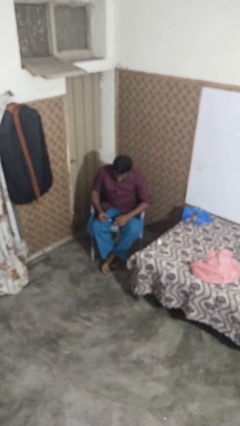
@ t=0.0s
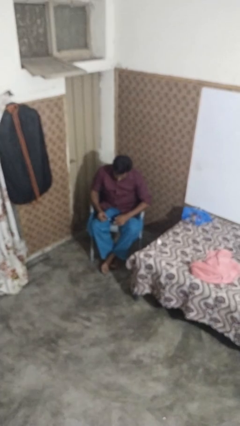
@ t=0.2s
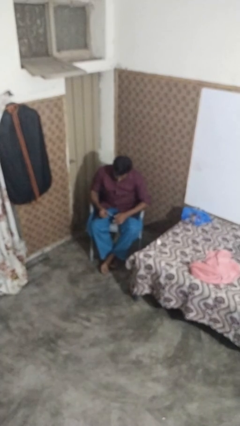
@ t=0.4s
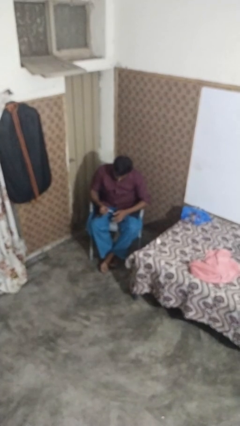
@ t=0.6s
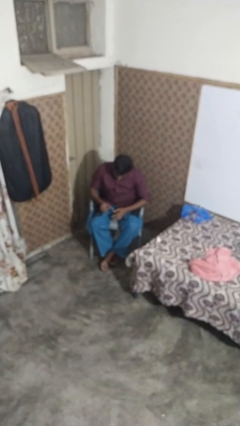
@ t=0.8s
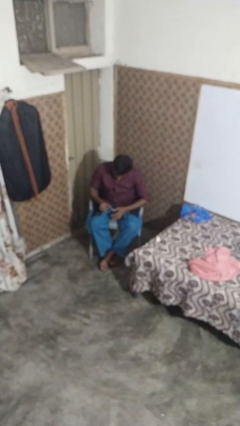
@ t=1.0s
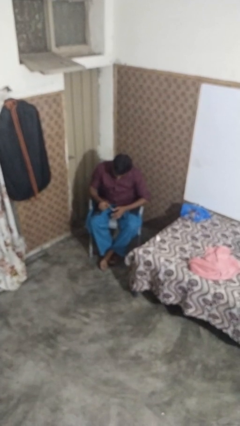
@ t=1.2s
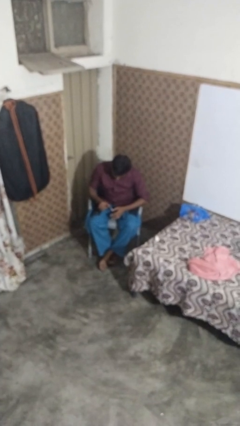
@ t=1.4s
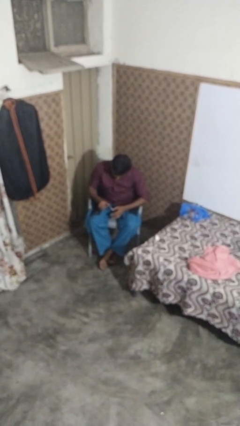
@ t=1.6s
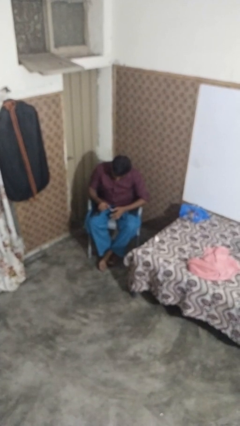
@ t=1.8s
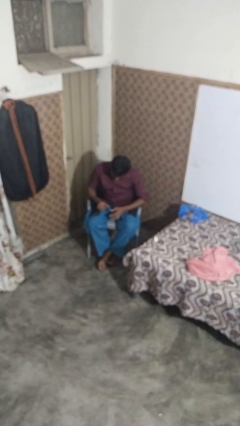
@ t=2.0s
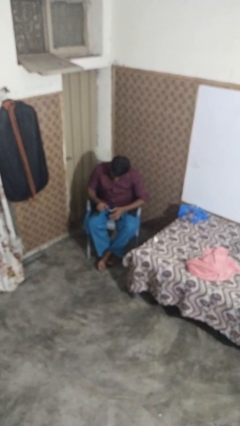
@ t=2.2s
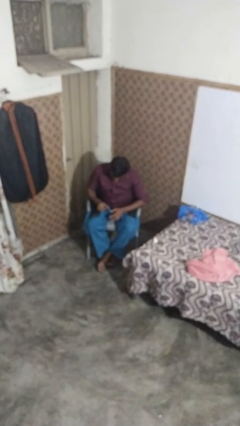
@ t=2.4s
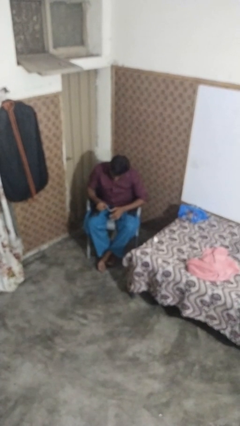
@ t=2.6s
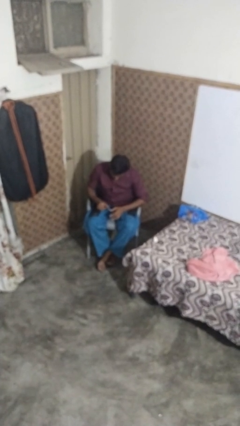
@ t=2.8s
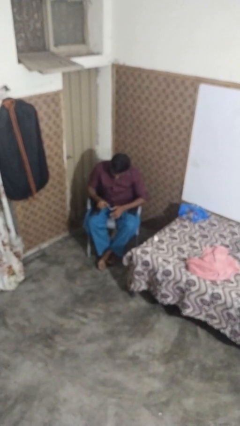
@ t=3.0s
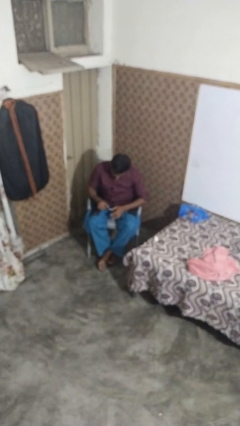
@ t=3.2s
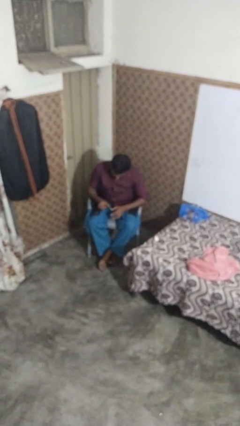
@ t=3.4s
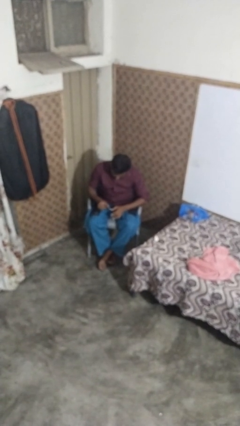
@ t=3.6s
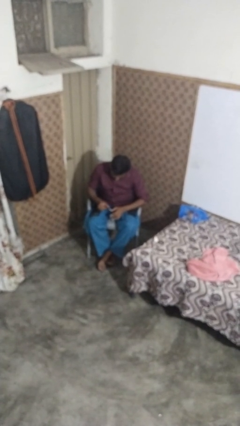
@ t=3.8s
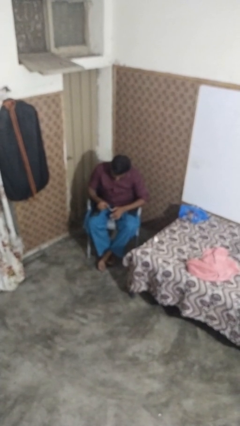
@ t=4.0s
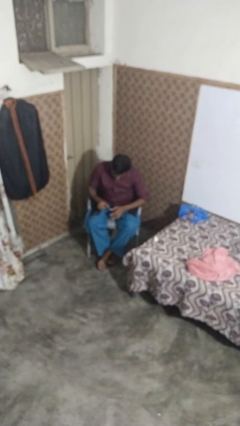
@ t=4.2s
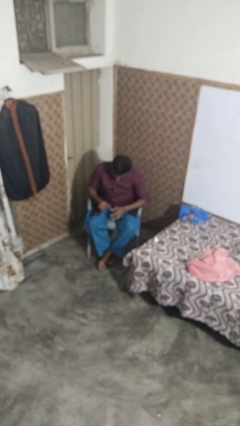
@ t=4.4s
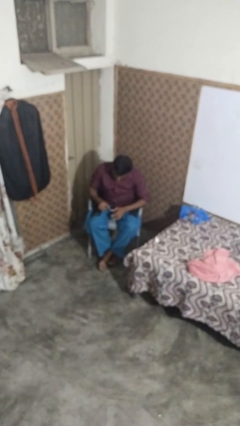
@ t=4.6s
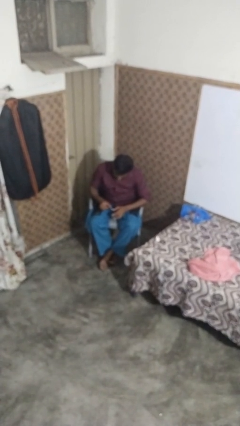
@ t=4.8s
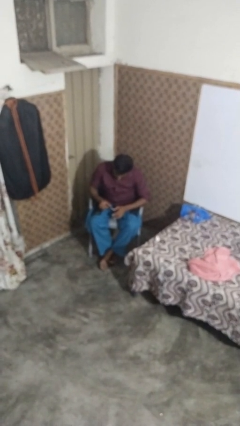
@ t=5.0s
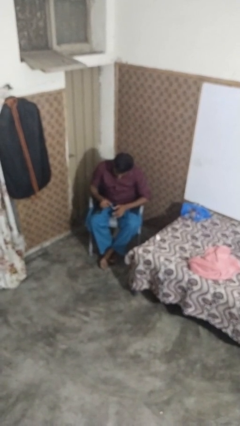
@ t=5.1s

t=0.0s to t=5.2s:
person paints fingernails

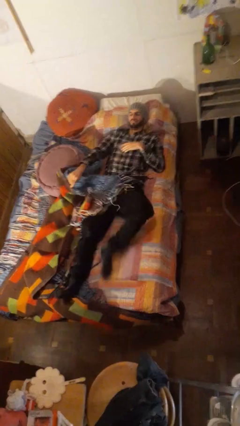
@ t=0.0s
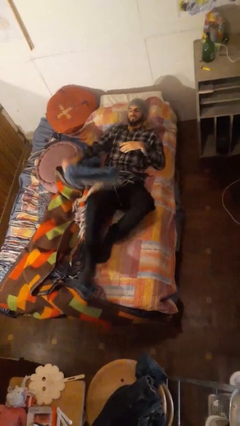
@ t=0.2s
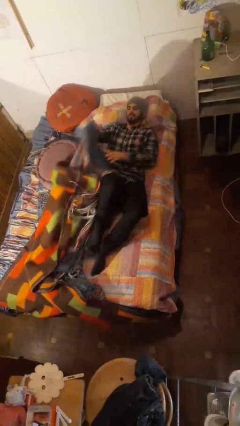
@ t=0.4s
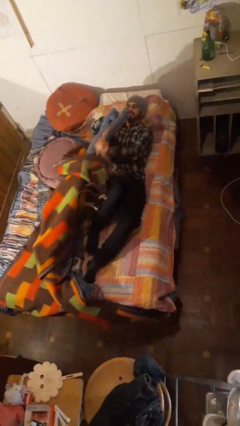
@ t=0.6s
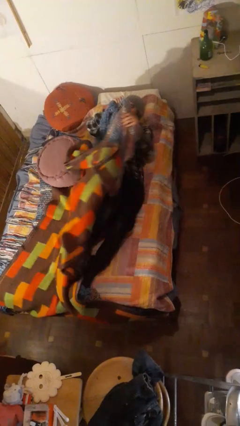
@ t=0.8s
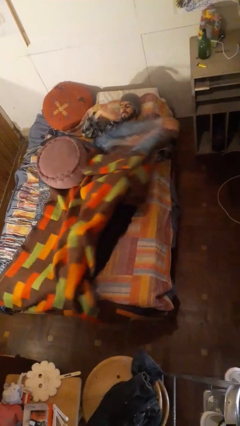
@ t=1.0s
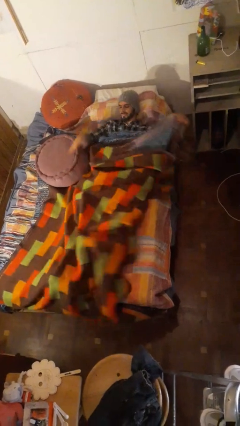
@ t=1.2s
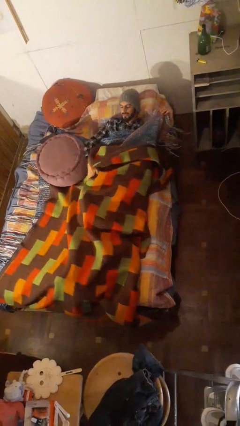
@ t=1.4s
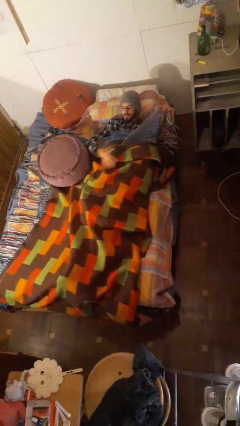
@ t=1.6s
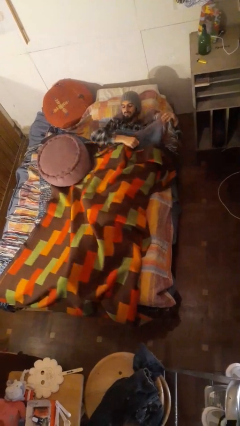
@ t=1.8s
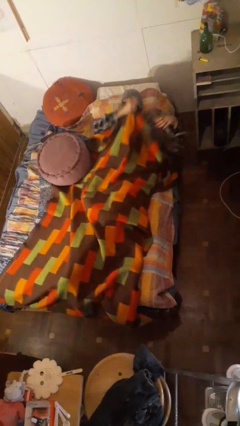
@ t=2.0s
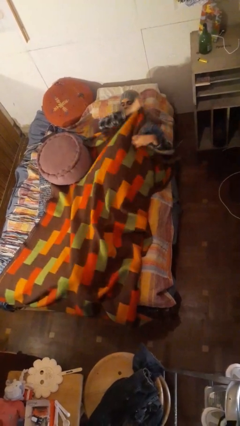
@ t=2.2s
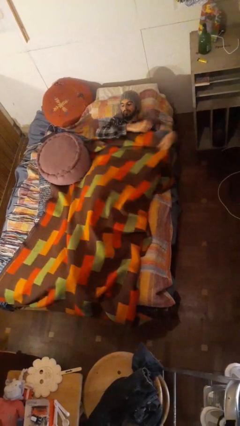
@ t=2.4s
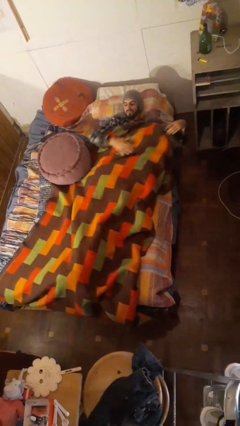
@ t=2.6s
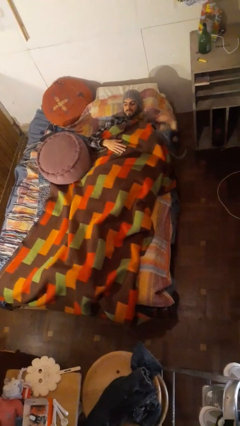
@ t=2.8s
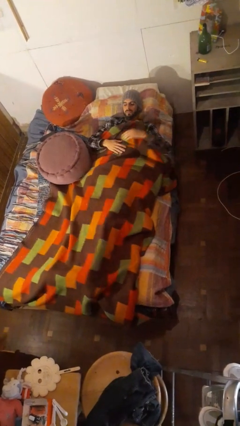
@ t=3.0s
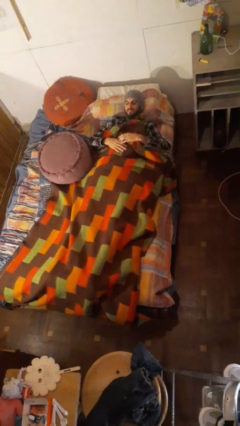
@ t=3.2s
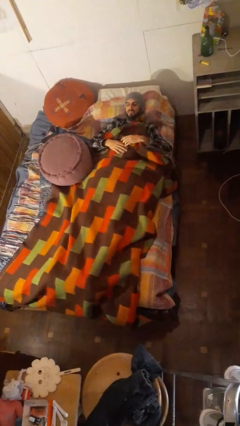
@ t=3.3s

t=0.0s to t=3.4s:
person covers with bedsheets

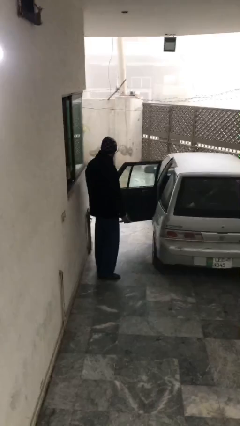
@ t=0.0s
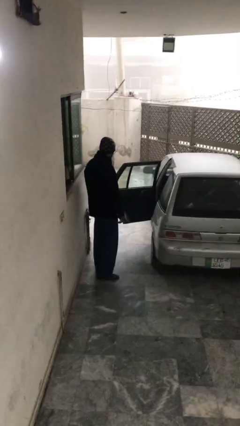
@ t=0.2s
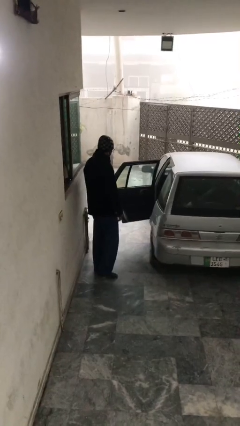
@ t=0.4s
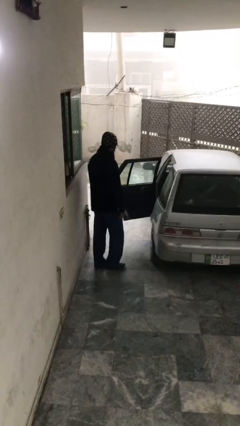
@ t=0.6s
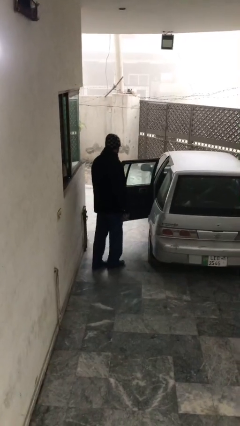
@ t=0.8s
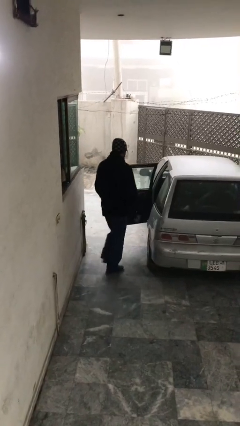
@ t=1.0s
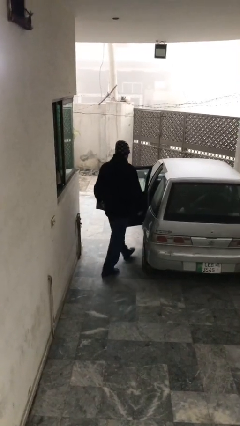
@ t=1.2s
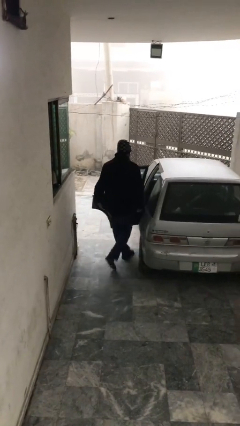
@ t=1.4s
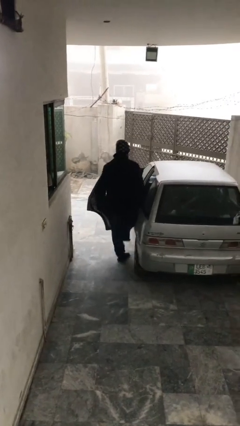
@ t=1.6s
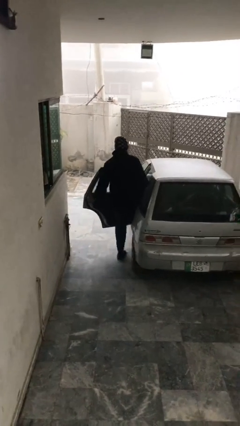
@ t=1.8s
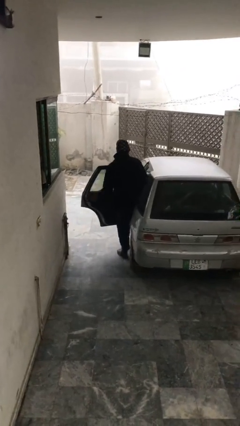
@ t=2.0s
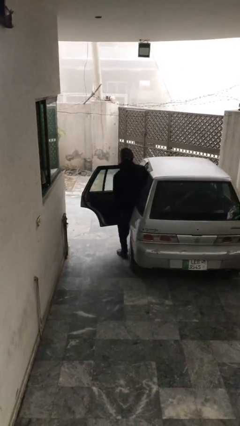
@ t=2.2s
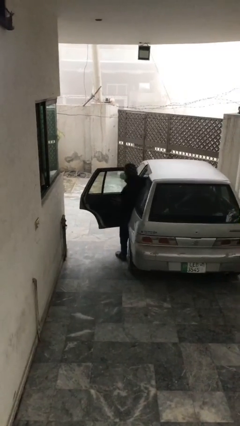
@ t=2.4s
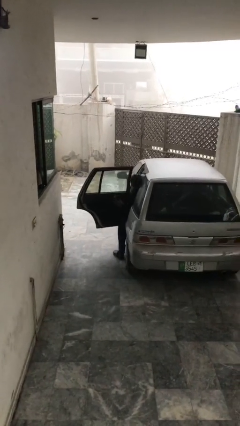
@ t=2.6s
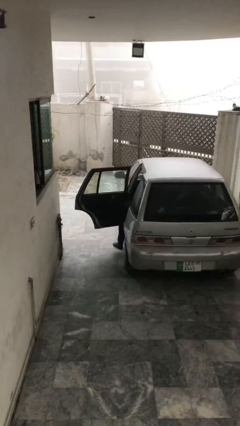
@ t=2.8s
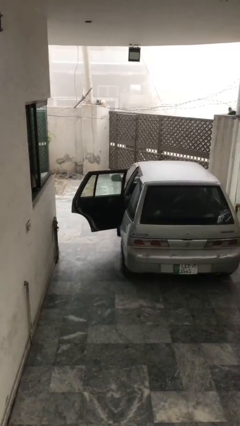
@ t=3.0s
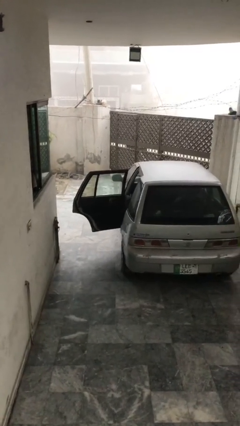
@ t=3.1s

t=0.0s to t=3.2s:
person enters car

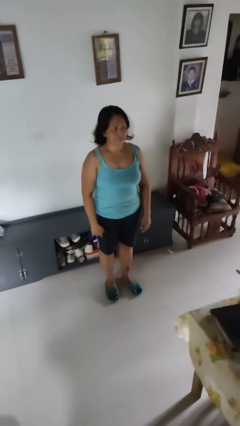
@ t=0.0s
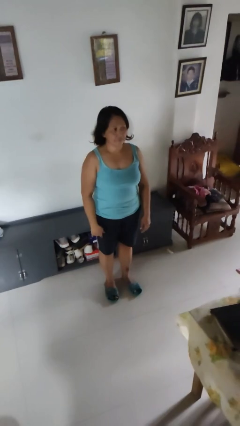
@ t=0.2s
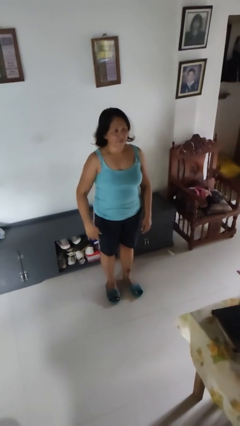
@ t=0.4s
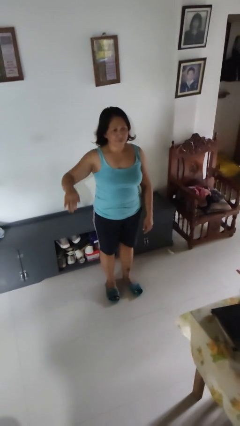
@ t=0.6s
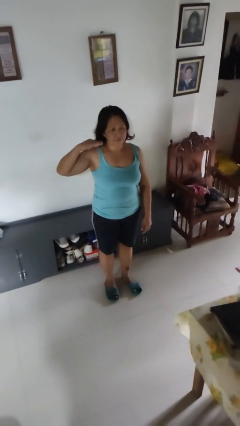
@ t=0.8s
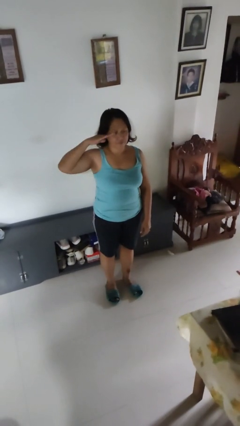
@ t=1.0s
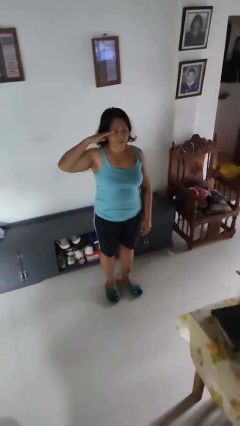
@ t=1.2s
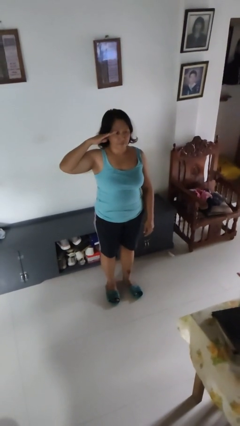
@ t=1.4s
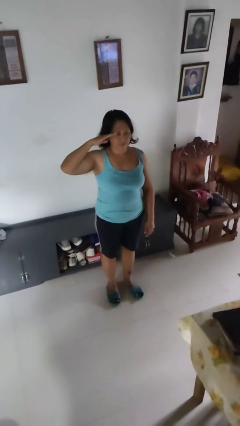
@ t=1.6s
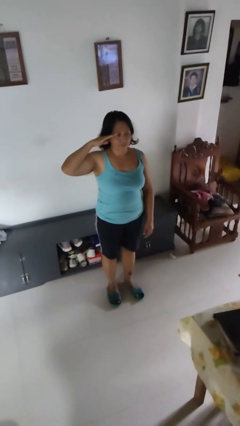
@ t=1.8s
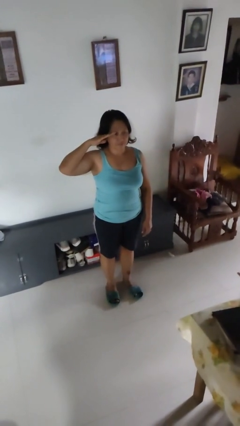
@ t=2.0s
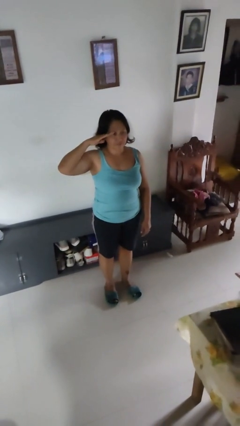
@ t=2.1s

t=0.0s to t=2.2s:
person salutes

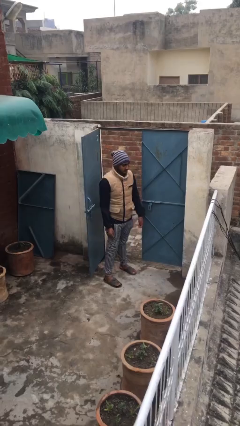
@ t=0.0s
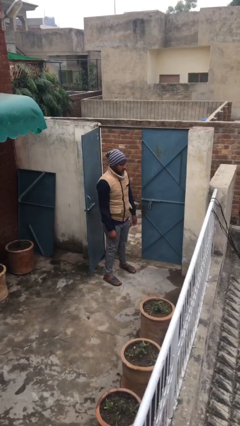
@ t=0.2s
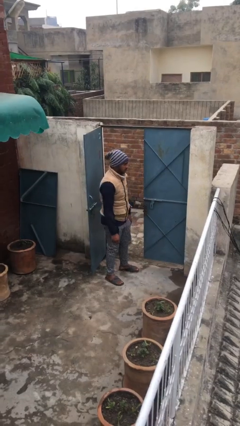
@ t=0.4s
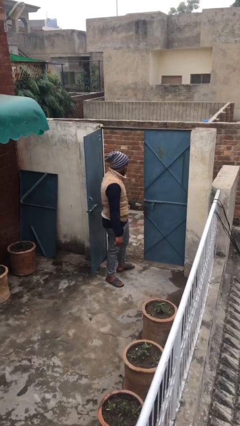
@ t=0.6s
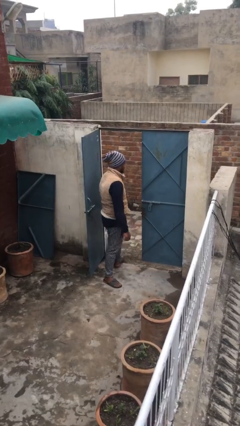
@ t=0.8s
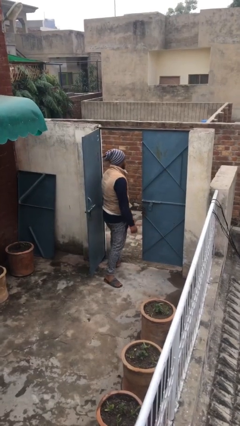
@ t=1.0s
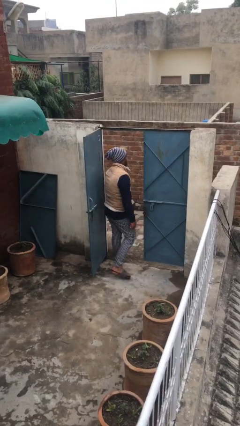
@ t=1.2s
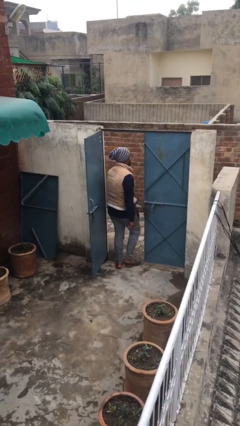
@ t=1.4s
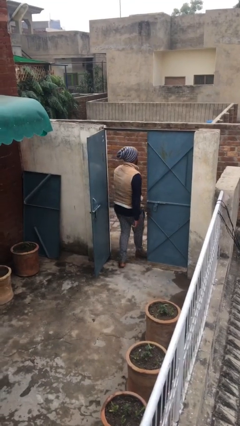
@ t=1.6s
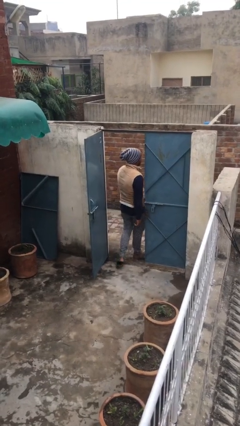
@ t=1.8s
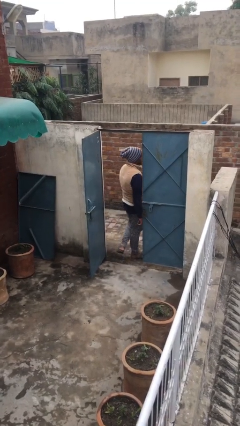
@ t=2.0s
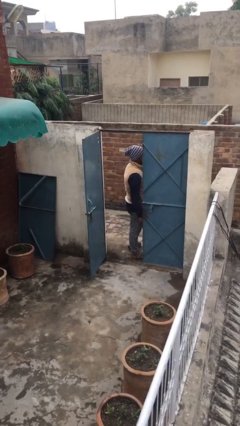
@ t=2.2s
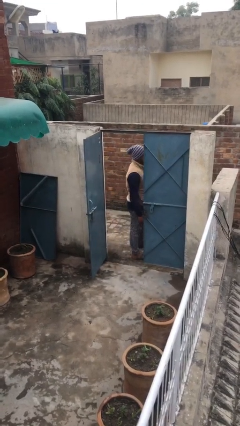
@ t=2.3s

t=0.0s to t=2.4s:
person exits scene through structure

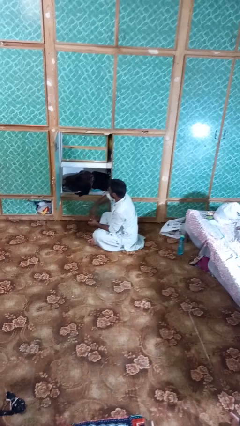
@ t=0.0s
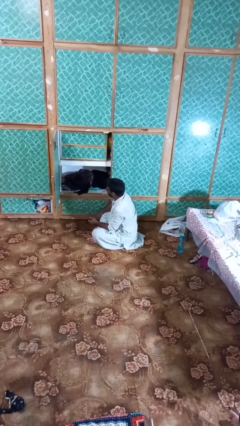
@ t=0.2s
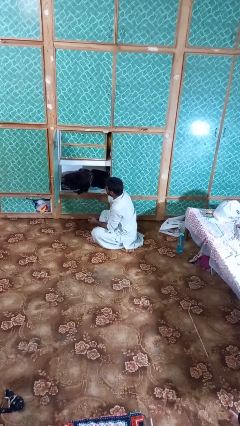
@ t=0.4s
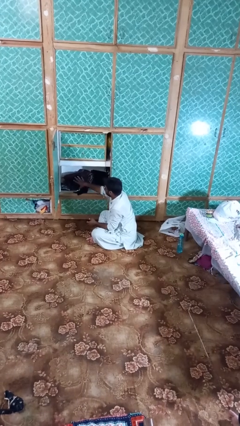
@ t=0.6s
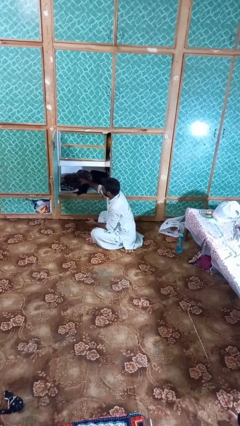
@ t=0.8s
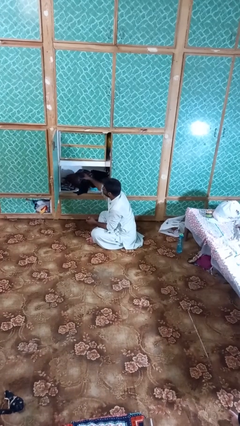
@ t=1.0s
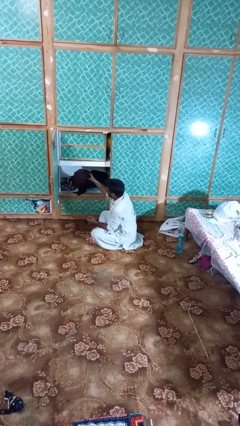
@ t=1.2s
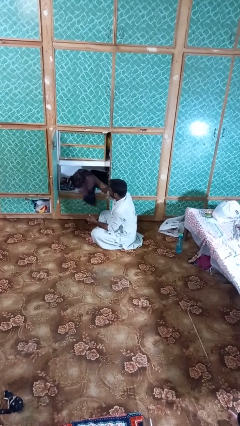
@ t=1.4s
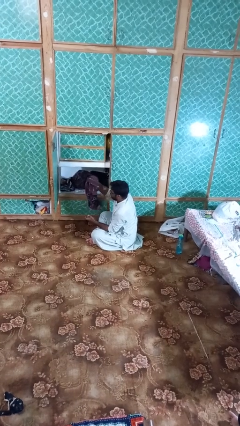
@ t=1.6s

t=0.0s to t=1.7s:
person takes clothes from dresser
